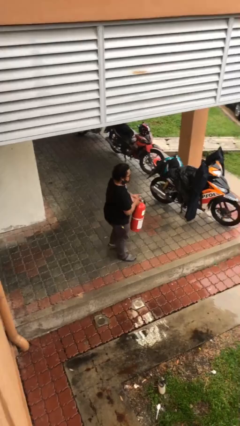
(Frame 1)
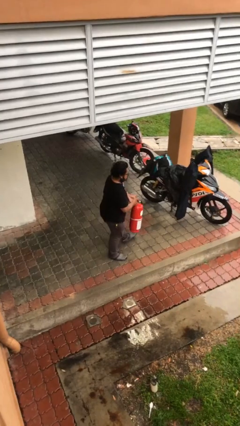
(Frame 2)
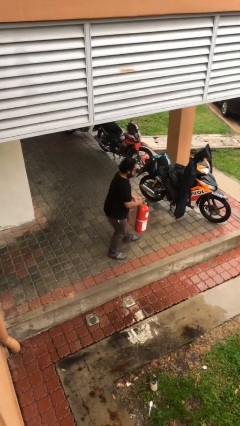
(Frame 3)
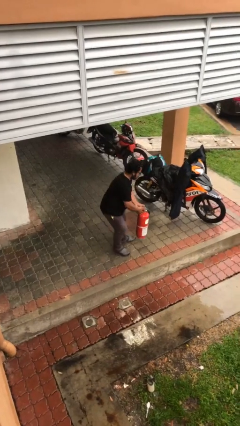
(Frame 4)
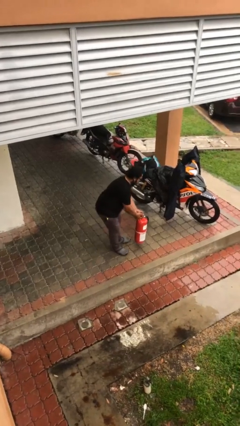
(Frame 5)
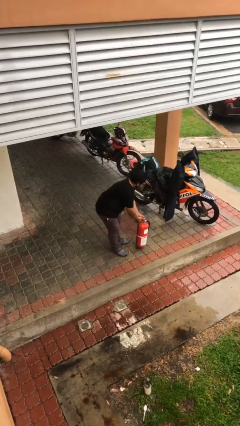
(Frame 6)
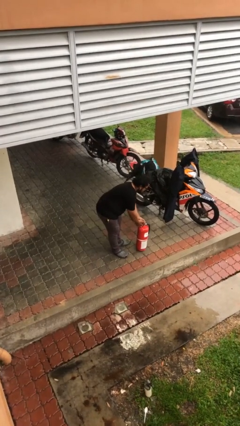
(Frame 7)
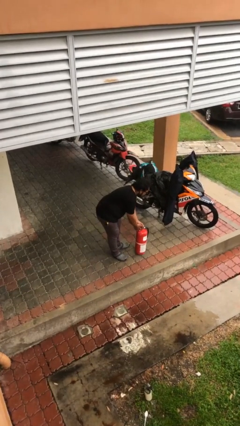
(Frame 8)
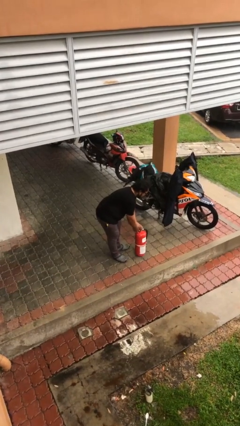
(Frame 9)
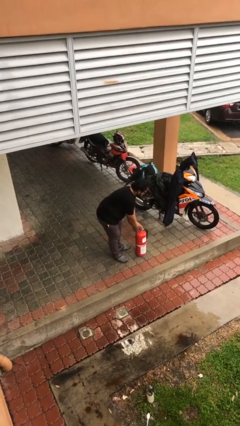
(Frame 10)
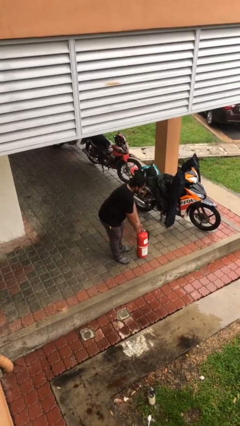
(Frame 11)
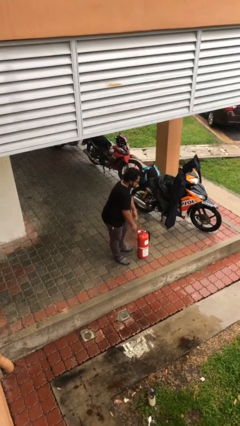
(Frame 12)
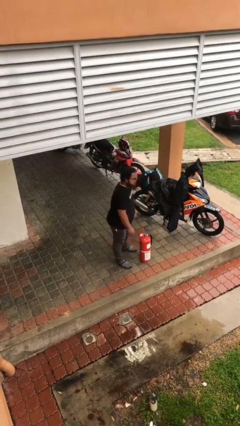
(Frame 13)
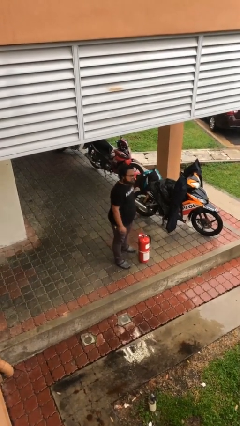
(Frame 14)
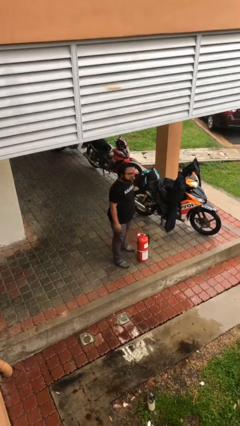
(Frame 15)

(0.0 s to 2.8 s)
person puts down object on floor

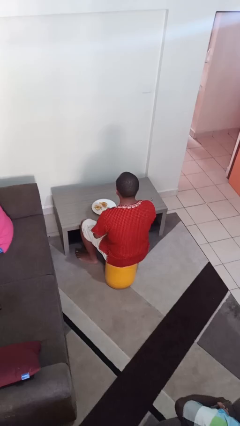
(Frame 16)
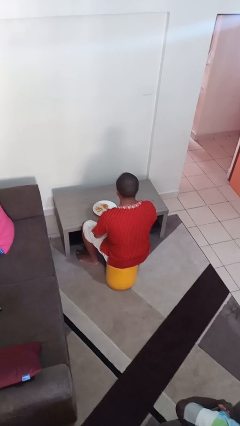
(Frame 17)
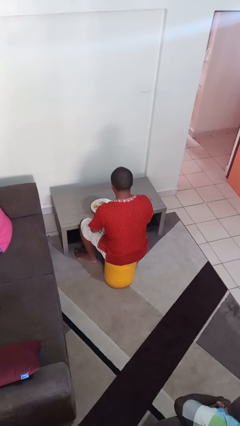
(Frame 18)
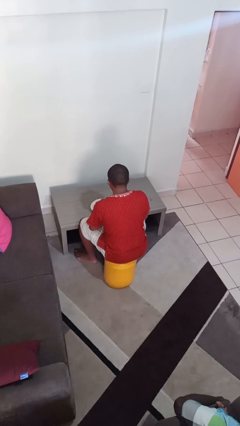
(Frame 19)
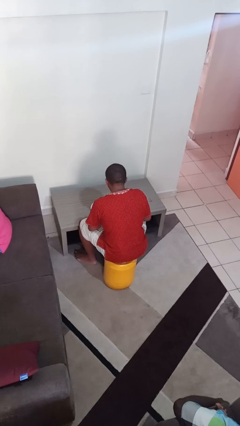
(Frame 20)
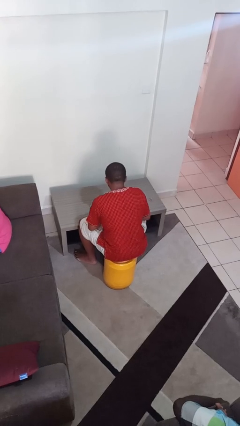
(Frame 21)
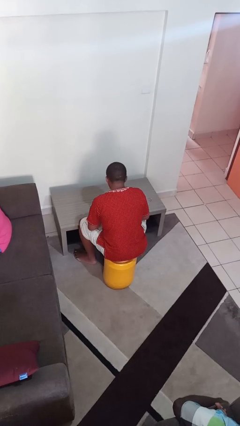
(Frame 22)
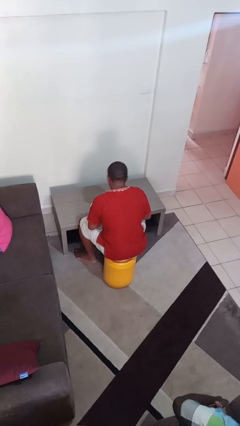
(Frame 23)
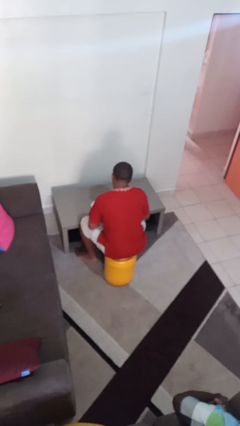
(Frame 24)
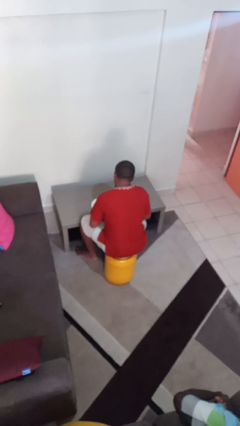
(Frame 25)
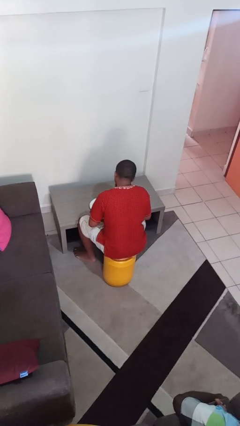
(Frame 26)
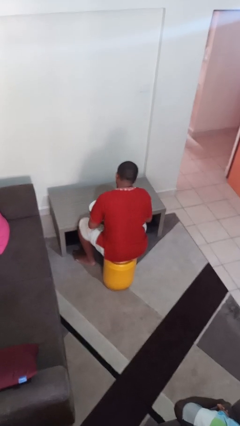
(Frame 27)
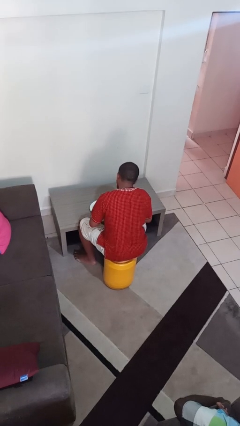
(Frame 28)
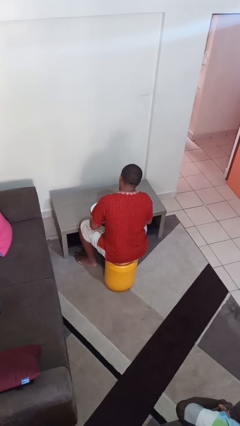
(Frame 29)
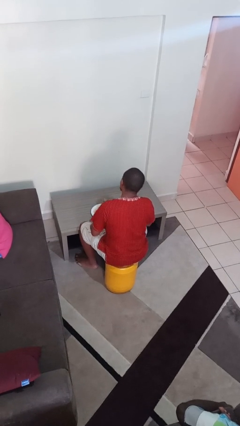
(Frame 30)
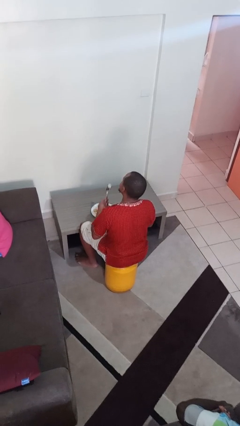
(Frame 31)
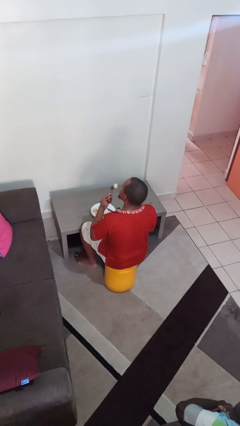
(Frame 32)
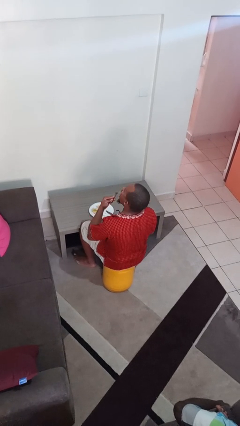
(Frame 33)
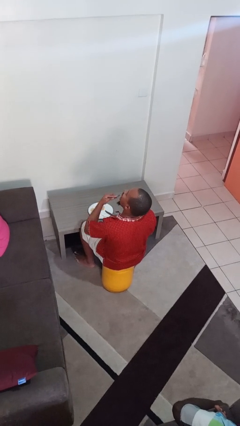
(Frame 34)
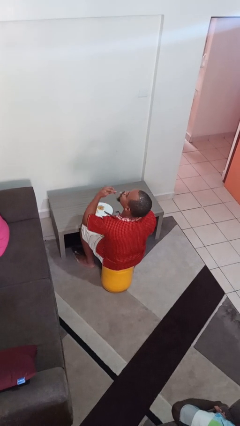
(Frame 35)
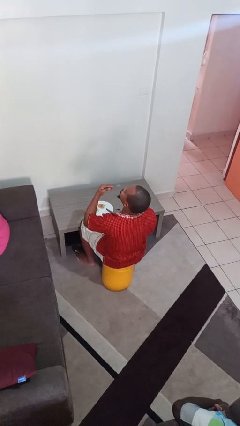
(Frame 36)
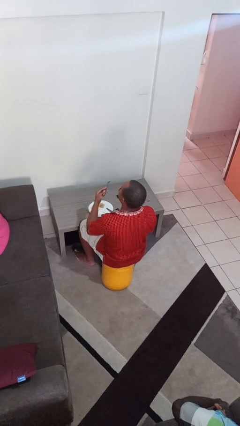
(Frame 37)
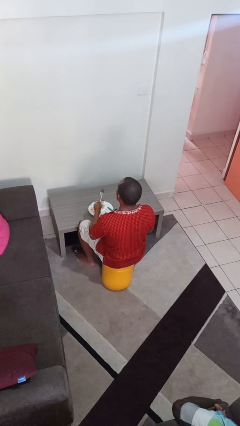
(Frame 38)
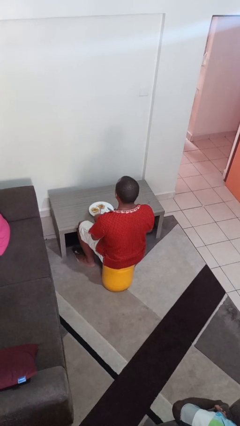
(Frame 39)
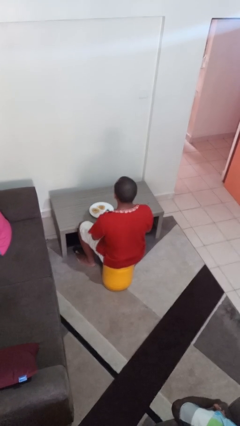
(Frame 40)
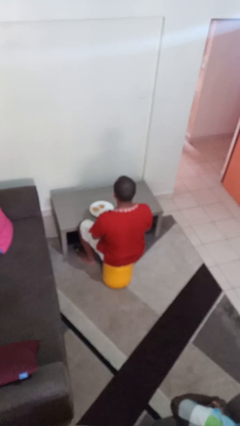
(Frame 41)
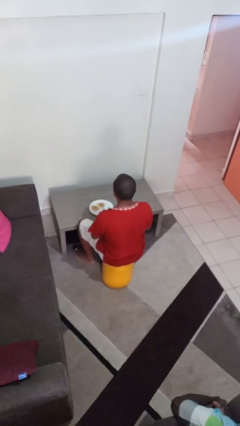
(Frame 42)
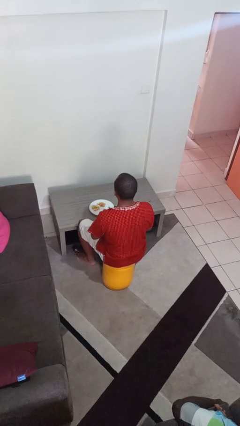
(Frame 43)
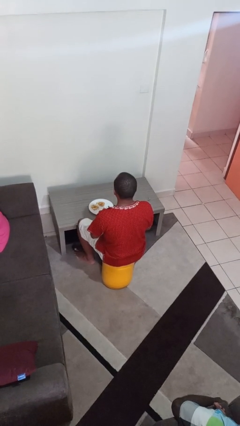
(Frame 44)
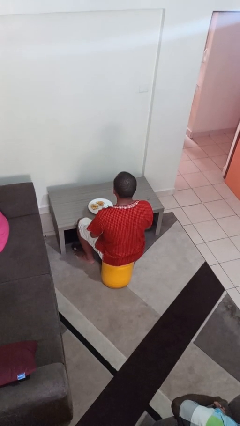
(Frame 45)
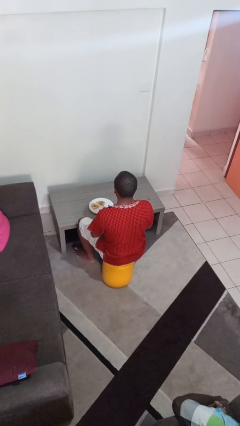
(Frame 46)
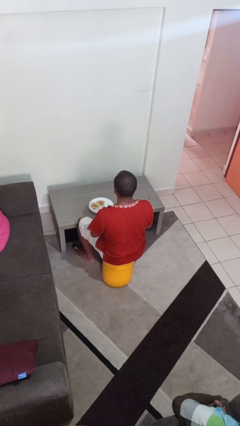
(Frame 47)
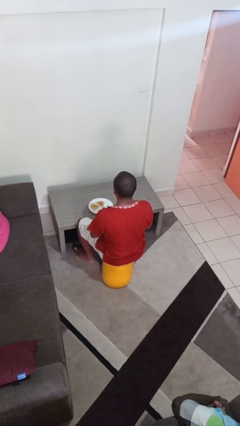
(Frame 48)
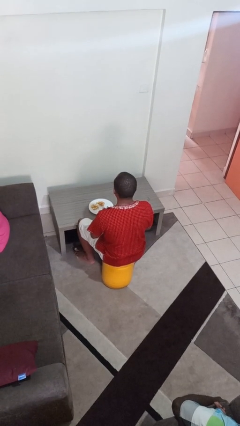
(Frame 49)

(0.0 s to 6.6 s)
person eats with utensil

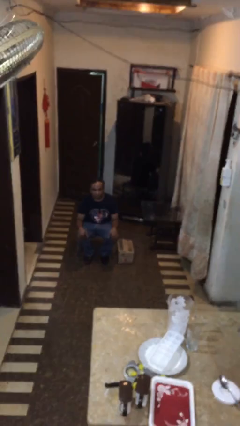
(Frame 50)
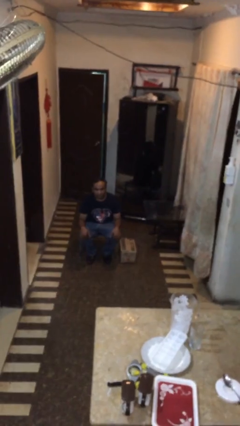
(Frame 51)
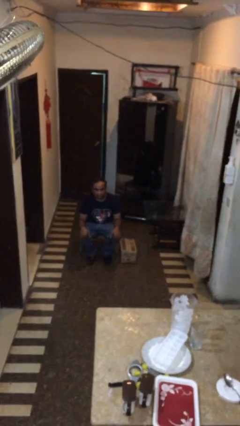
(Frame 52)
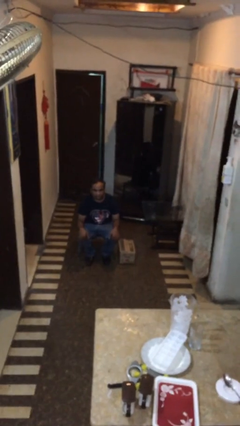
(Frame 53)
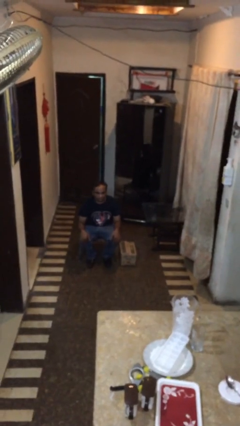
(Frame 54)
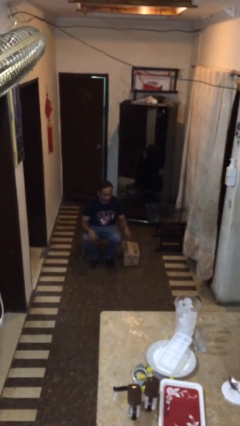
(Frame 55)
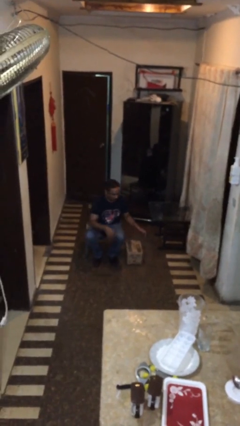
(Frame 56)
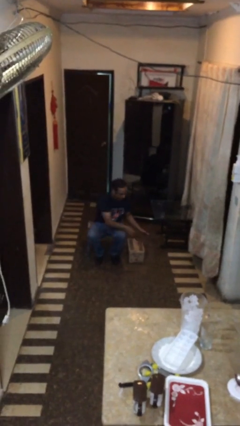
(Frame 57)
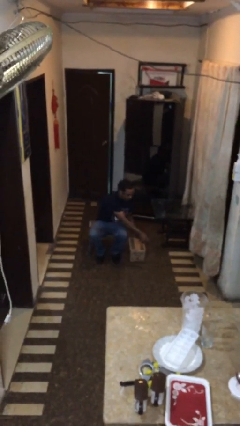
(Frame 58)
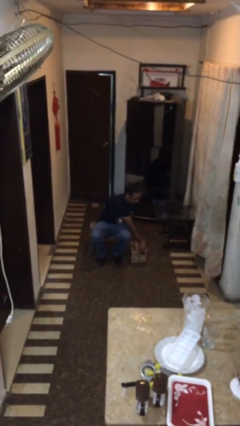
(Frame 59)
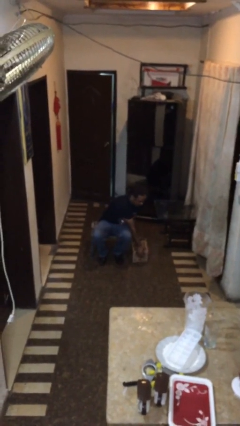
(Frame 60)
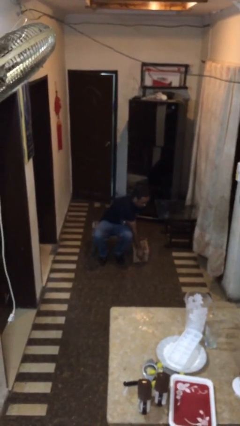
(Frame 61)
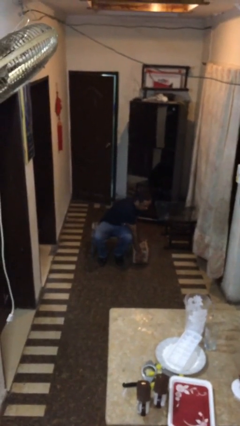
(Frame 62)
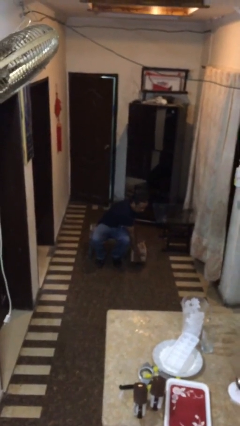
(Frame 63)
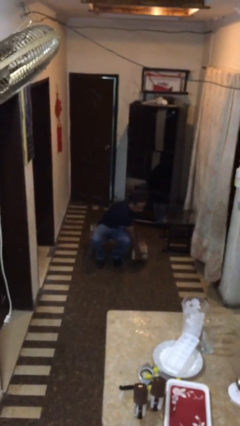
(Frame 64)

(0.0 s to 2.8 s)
person picks up object from floor

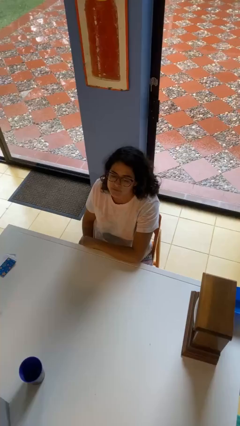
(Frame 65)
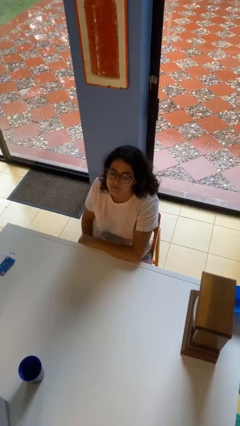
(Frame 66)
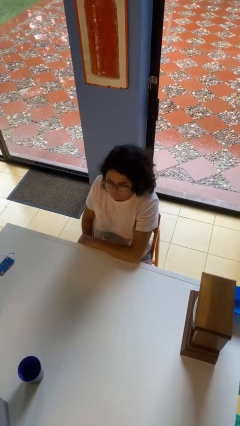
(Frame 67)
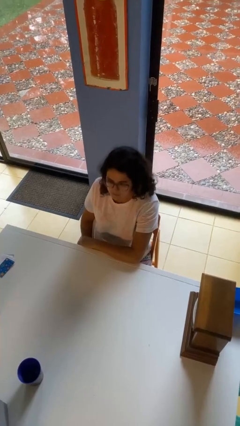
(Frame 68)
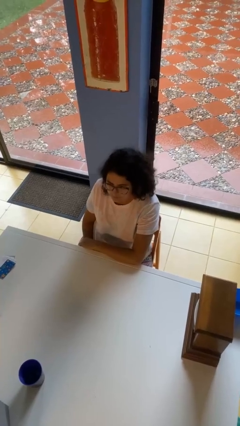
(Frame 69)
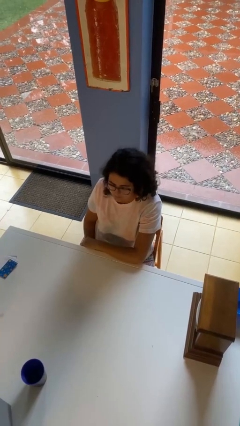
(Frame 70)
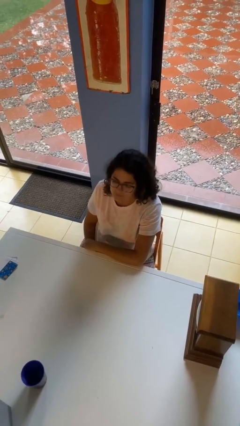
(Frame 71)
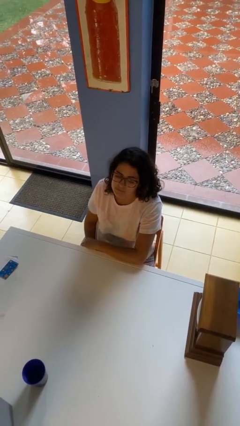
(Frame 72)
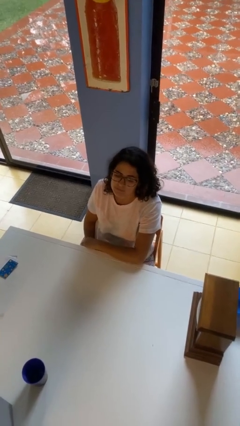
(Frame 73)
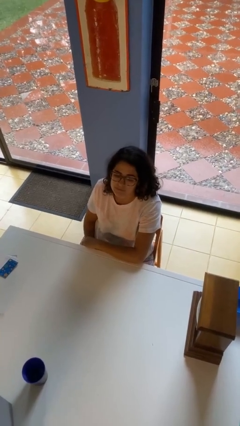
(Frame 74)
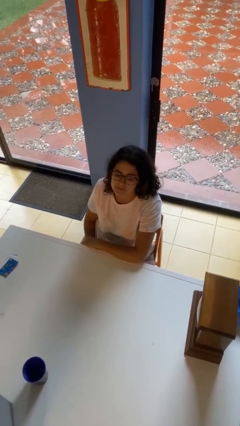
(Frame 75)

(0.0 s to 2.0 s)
person nods head

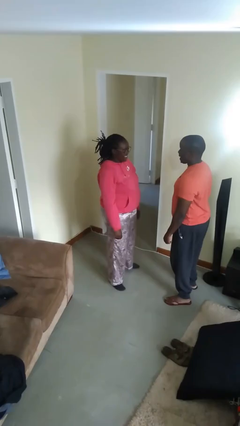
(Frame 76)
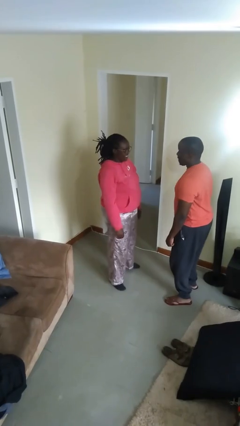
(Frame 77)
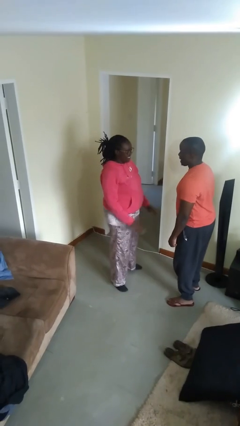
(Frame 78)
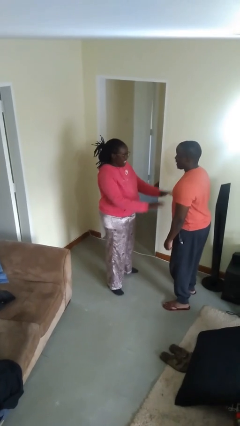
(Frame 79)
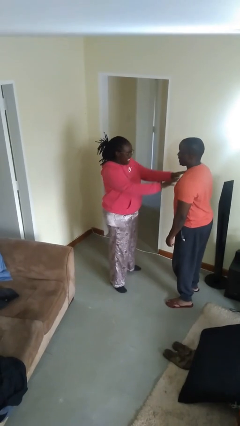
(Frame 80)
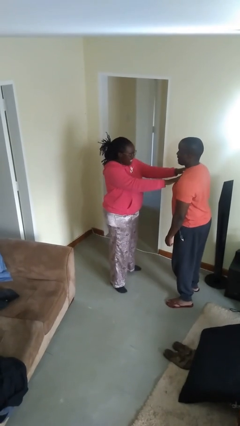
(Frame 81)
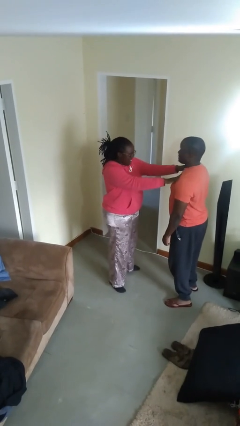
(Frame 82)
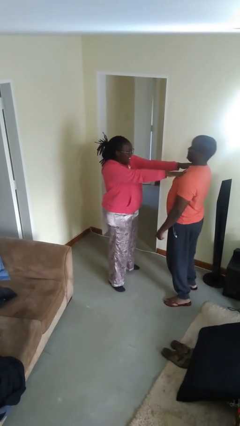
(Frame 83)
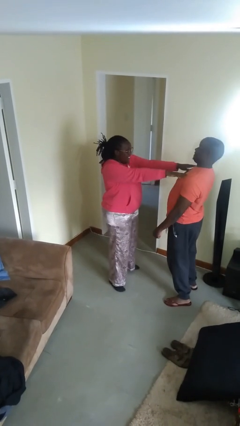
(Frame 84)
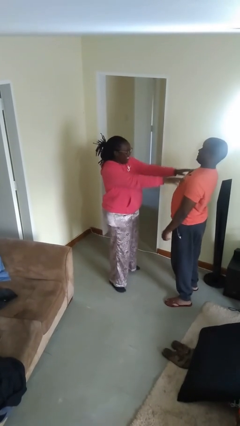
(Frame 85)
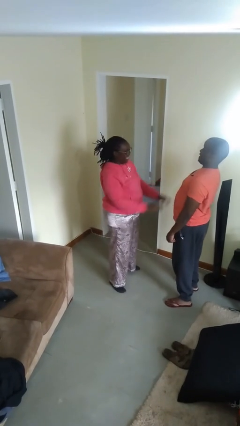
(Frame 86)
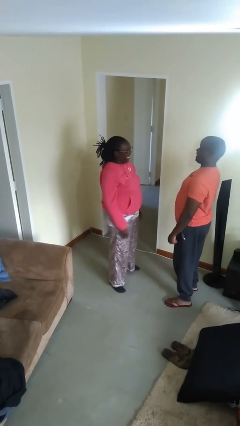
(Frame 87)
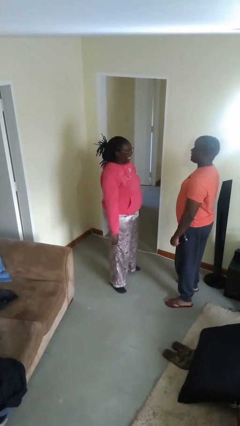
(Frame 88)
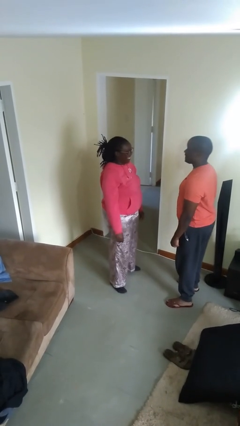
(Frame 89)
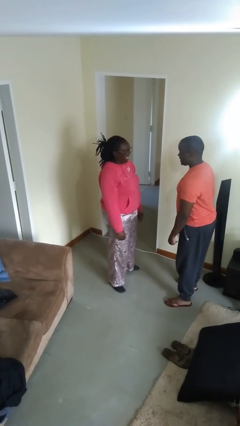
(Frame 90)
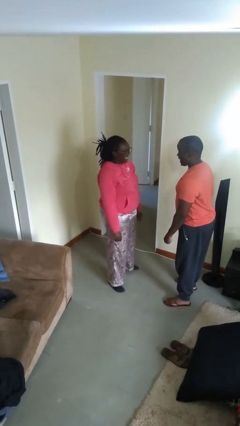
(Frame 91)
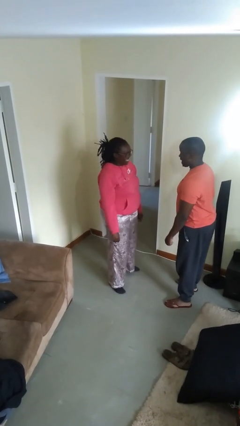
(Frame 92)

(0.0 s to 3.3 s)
person shoves person

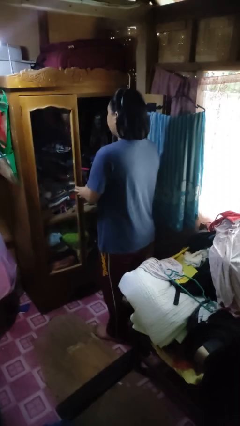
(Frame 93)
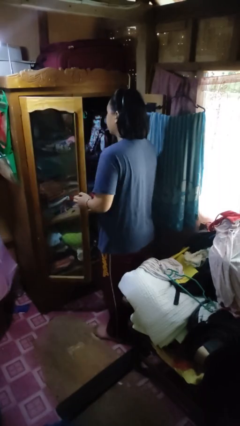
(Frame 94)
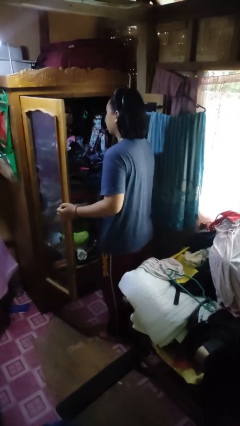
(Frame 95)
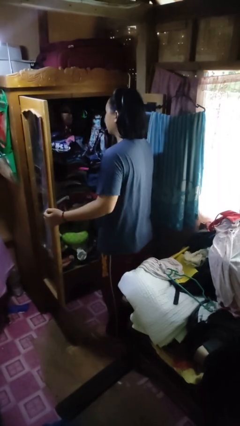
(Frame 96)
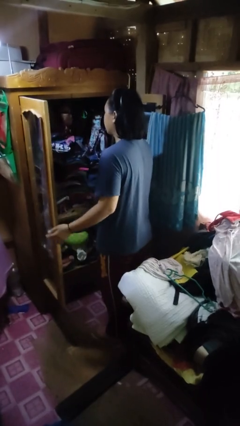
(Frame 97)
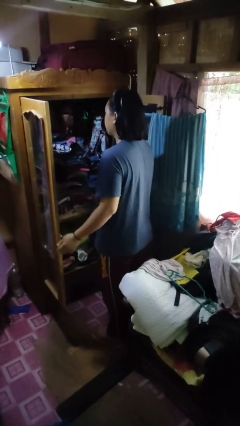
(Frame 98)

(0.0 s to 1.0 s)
person opens closet door
